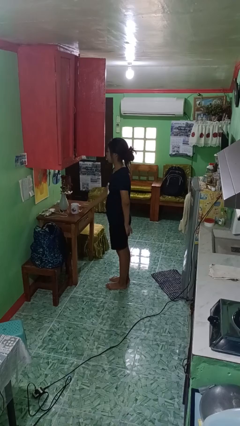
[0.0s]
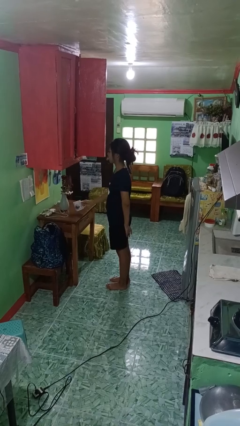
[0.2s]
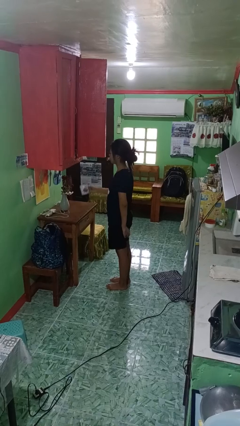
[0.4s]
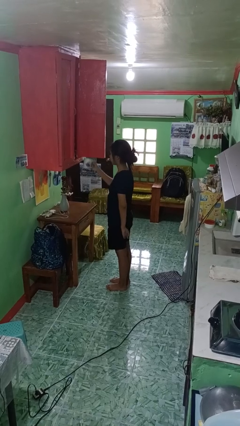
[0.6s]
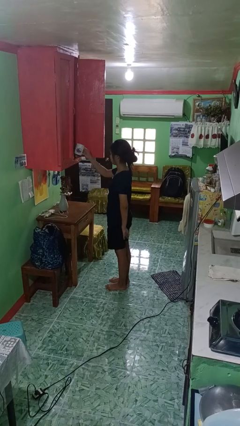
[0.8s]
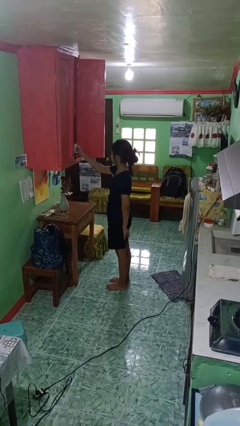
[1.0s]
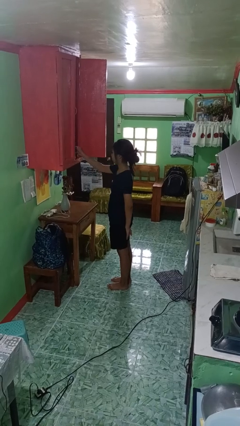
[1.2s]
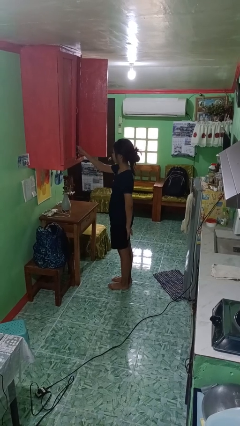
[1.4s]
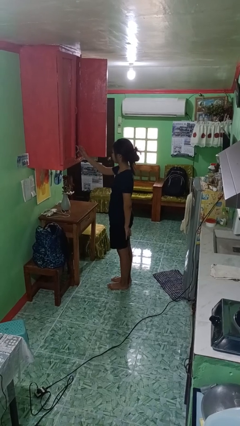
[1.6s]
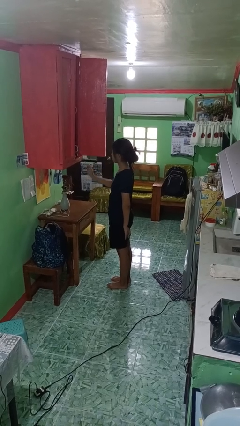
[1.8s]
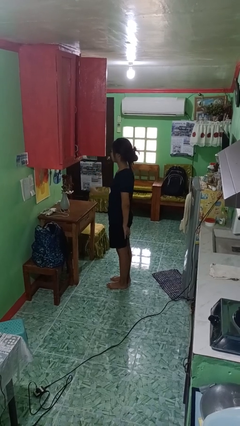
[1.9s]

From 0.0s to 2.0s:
person puts object in cabinet

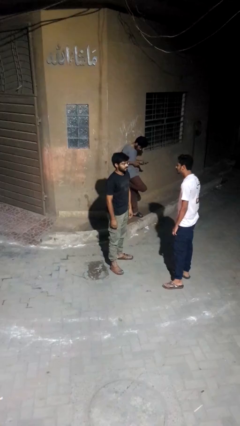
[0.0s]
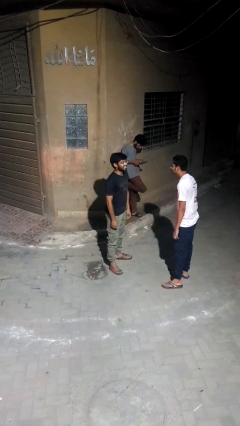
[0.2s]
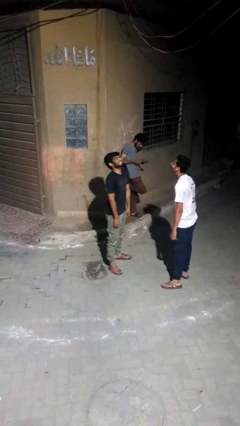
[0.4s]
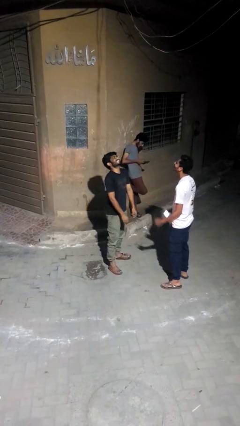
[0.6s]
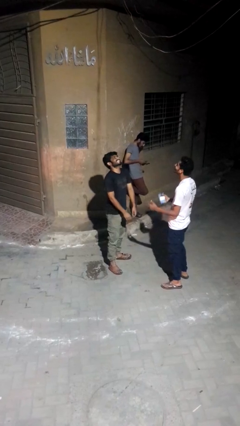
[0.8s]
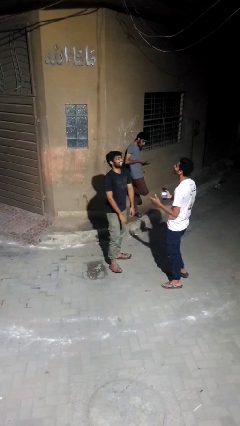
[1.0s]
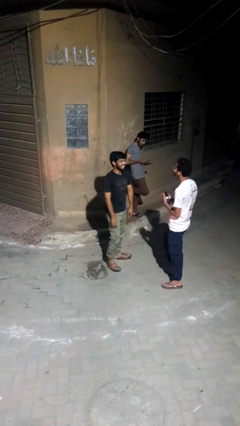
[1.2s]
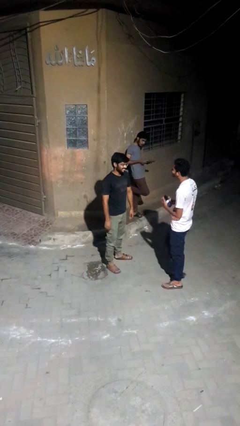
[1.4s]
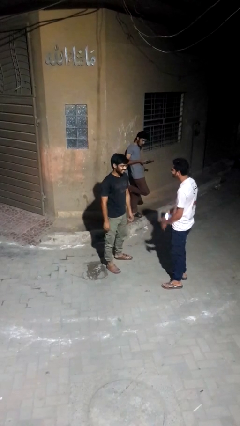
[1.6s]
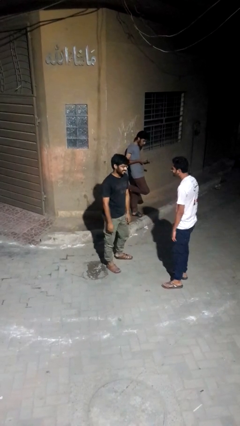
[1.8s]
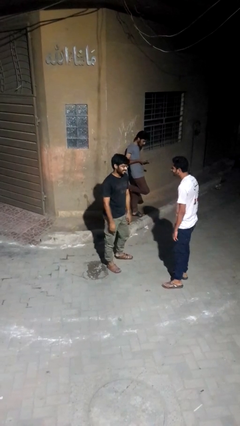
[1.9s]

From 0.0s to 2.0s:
person laughs with person

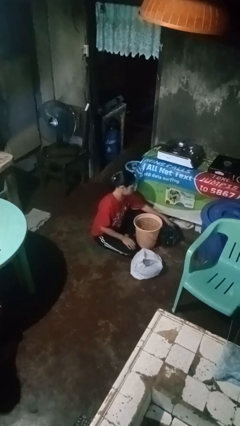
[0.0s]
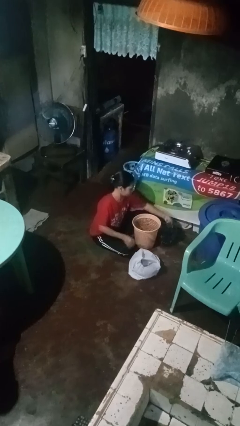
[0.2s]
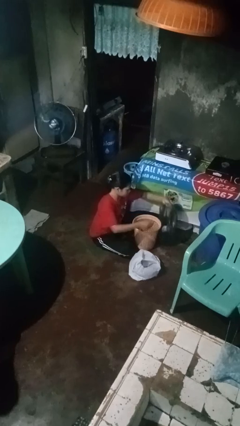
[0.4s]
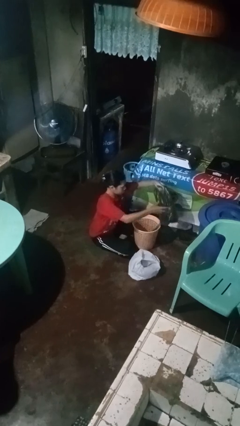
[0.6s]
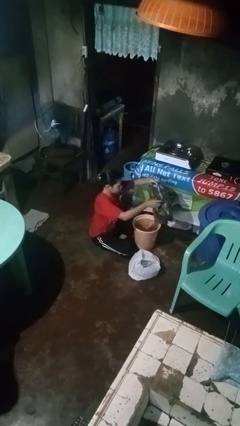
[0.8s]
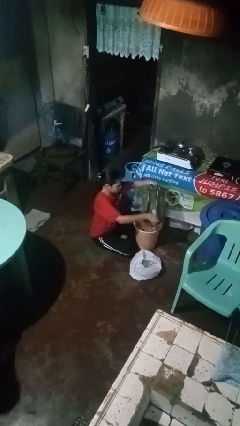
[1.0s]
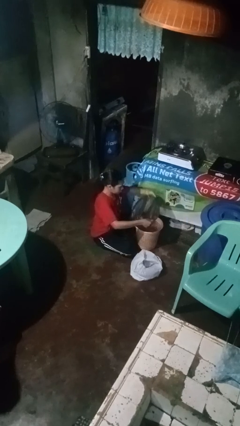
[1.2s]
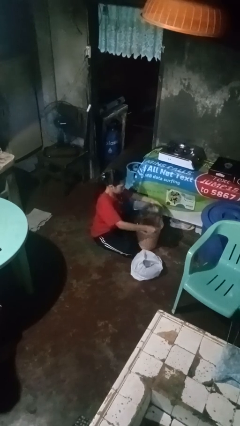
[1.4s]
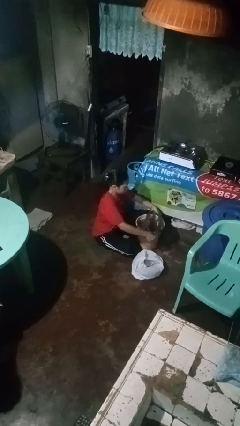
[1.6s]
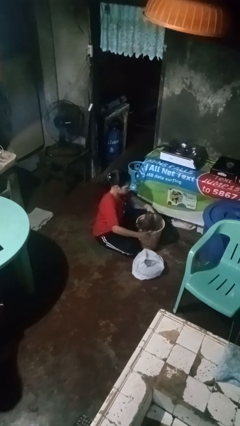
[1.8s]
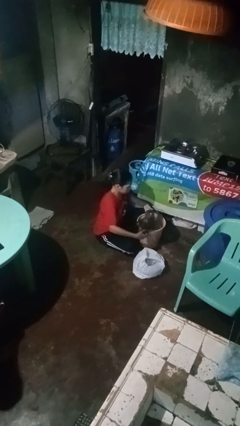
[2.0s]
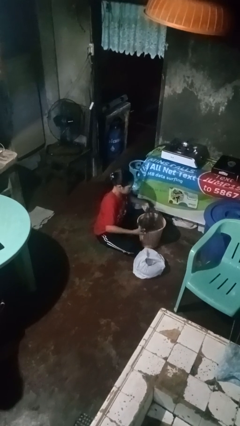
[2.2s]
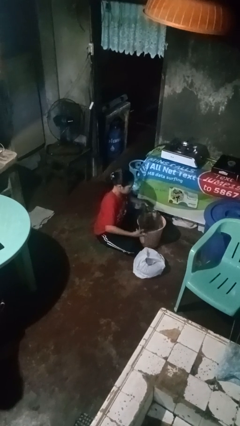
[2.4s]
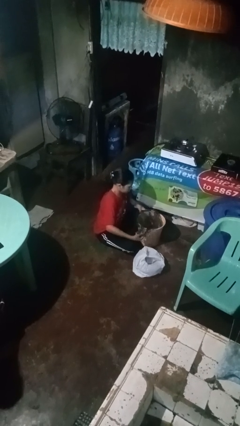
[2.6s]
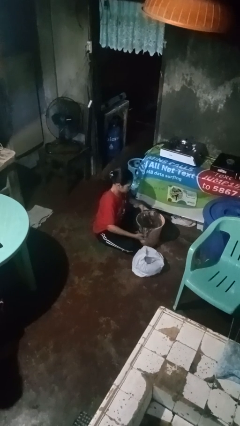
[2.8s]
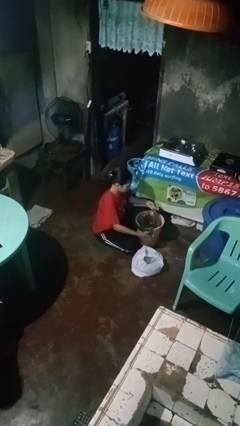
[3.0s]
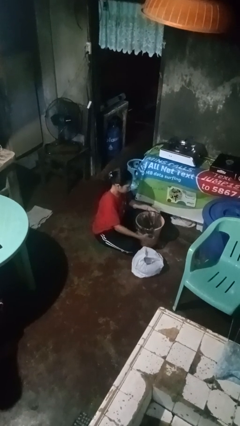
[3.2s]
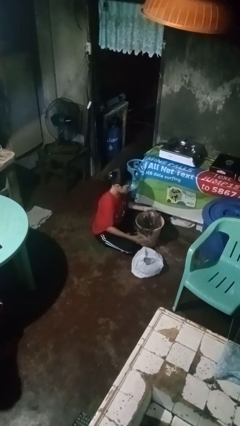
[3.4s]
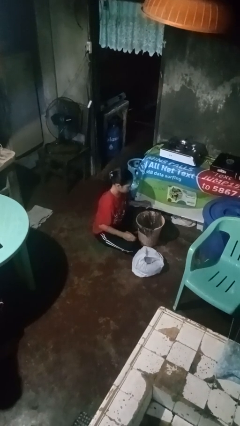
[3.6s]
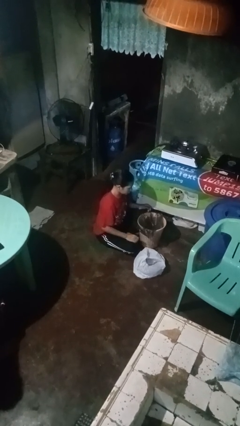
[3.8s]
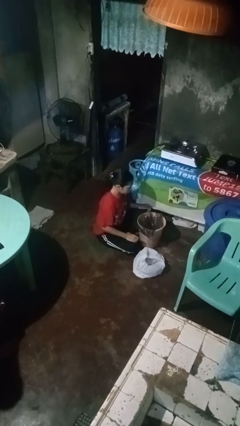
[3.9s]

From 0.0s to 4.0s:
person inserts trashbag into trashcan

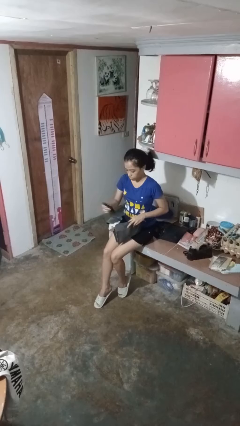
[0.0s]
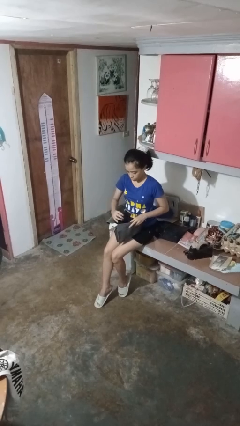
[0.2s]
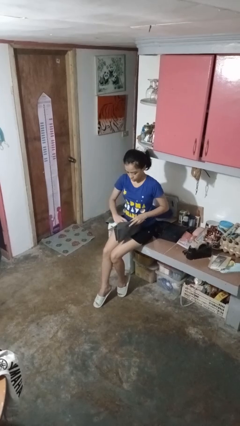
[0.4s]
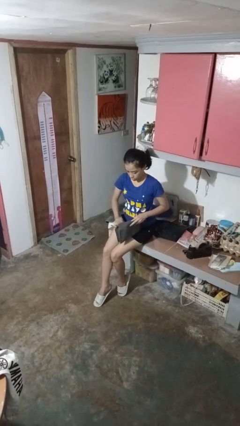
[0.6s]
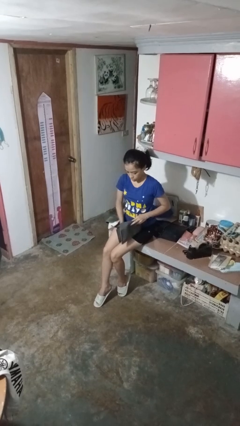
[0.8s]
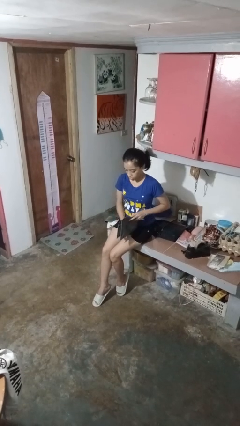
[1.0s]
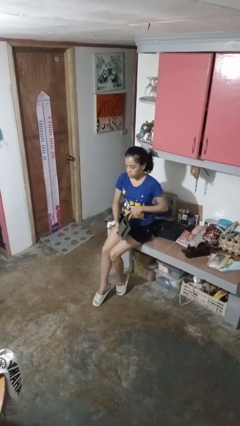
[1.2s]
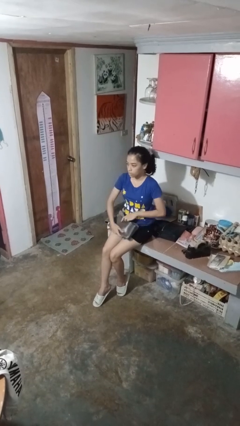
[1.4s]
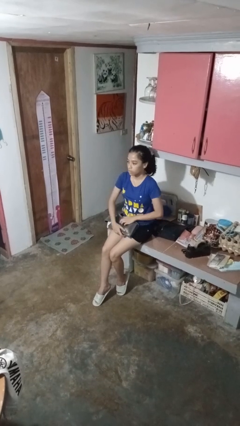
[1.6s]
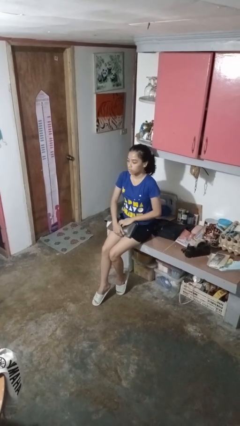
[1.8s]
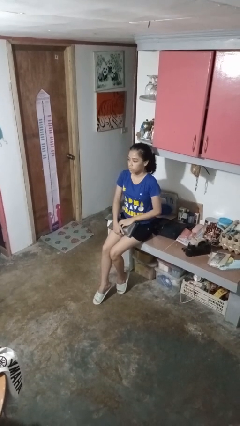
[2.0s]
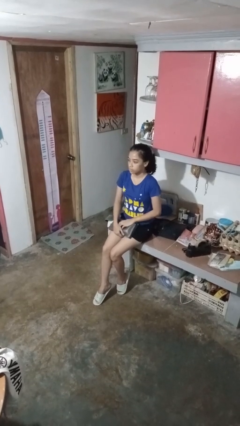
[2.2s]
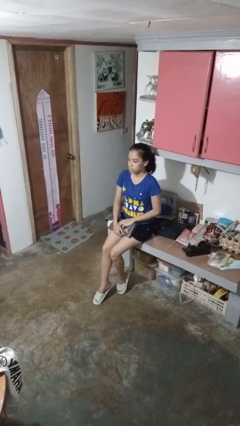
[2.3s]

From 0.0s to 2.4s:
person puts object into purse

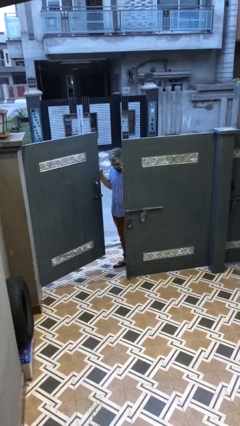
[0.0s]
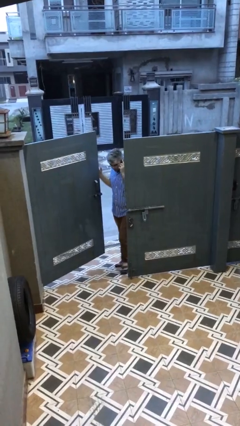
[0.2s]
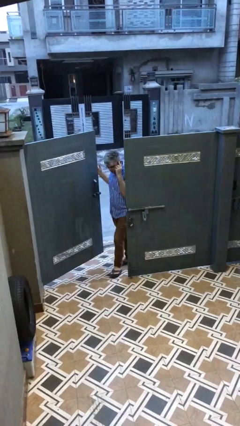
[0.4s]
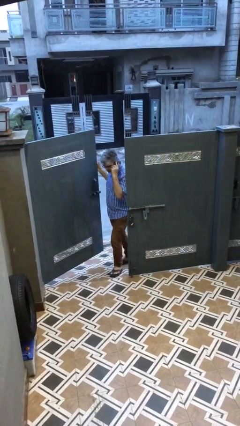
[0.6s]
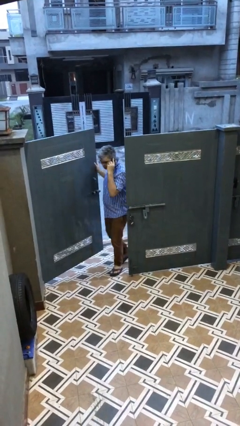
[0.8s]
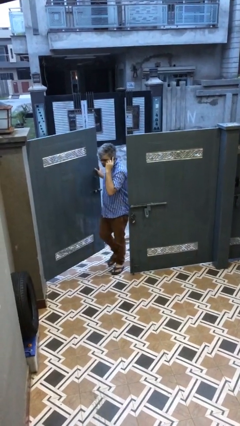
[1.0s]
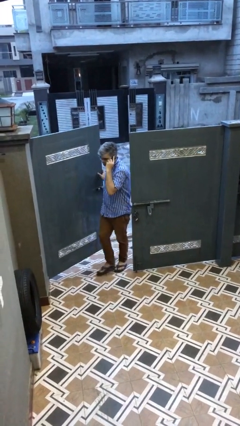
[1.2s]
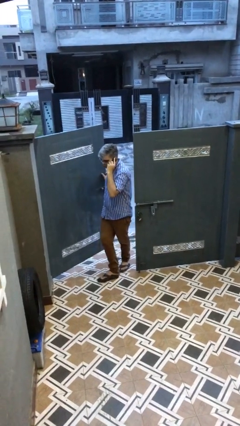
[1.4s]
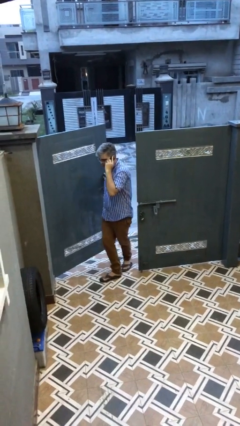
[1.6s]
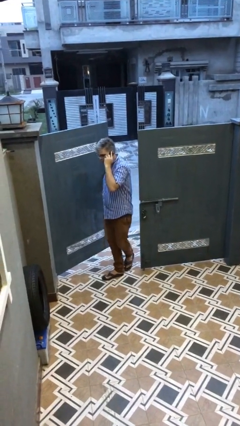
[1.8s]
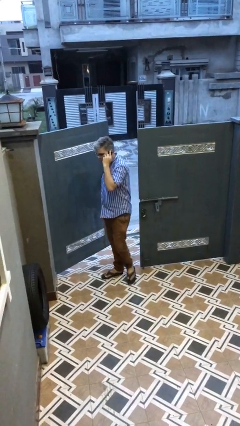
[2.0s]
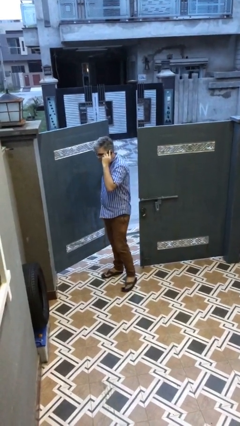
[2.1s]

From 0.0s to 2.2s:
person enters scene through structure

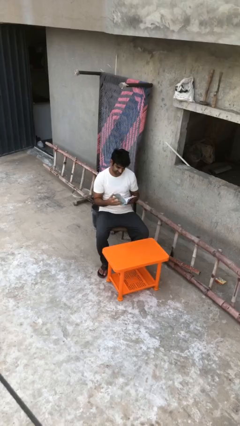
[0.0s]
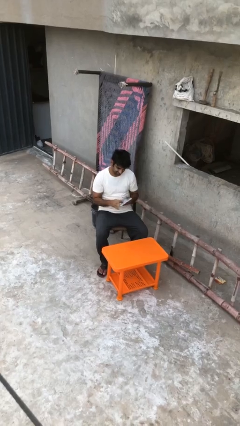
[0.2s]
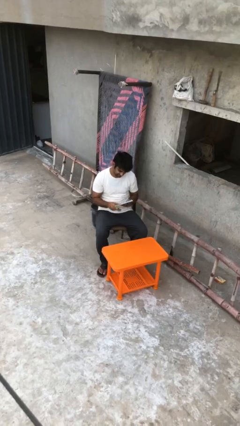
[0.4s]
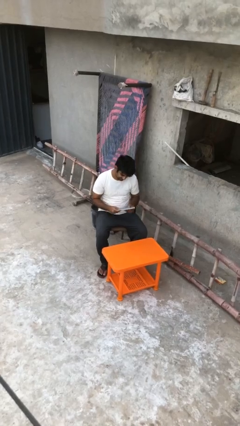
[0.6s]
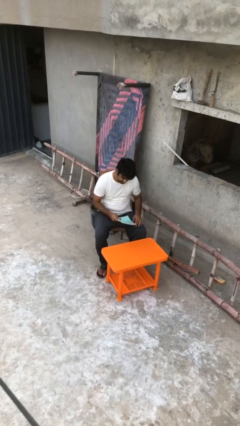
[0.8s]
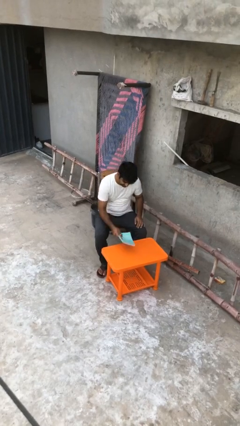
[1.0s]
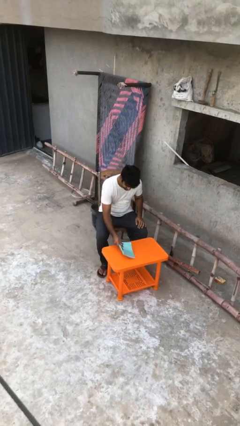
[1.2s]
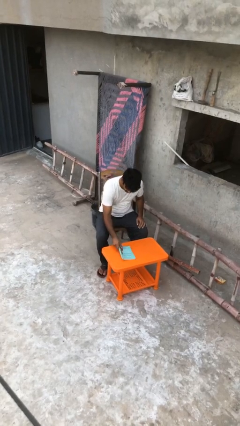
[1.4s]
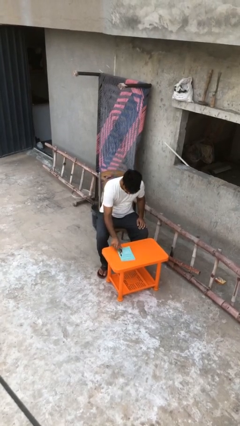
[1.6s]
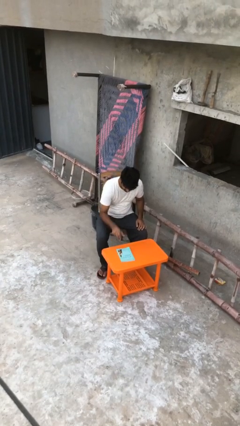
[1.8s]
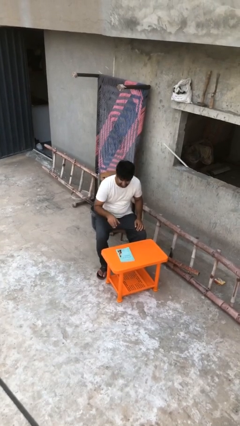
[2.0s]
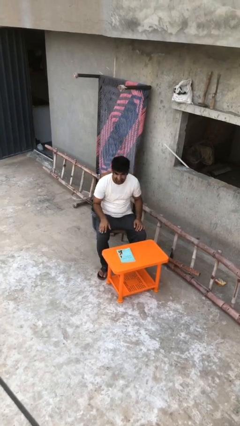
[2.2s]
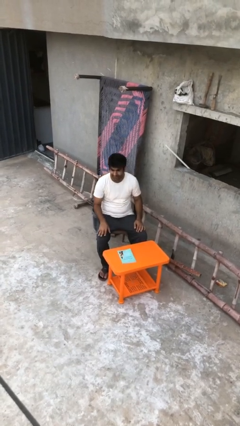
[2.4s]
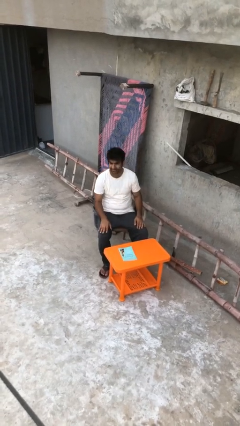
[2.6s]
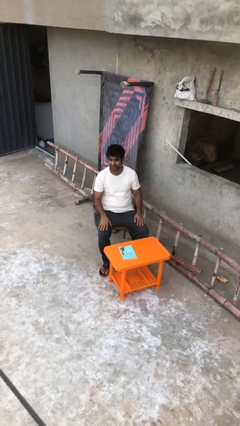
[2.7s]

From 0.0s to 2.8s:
person puts down object on table

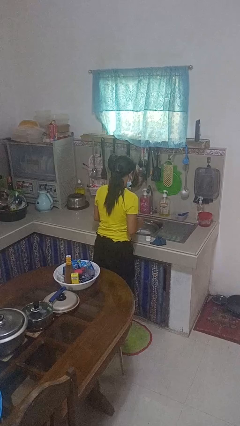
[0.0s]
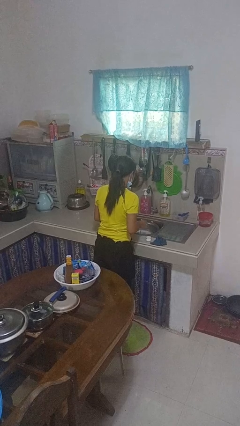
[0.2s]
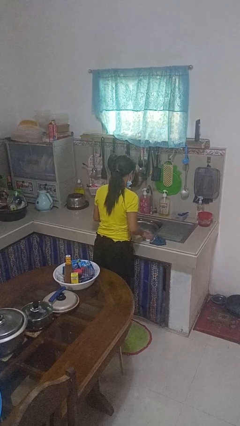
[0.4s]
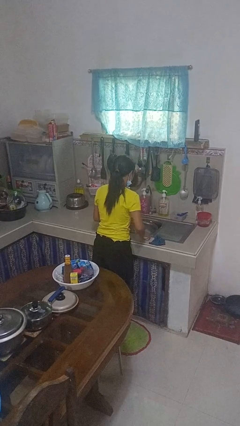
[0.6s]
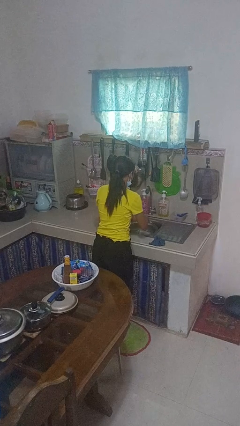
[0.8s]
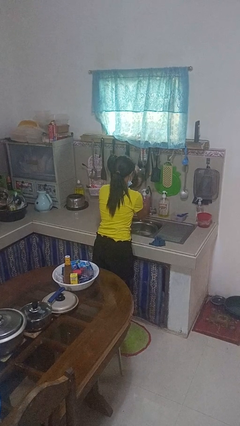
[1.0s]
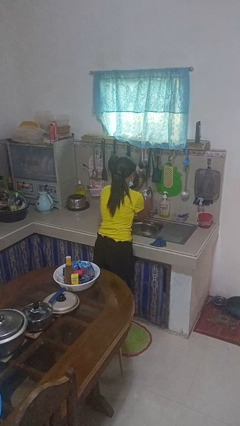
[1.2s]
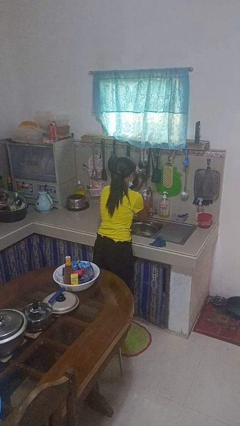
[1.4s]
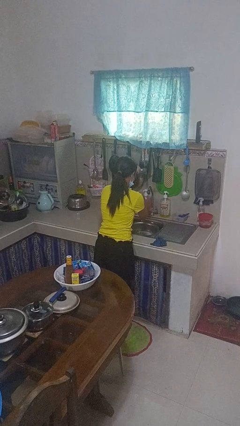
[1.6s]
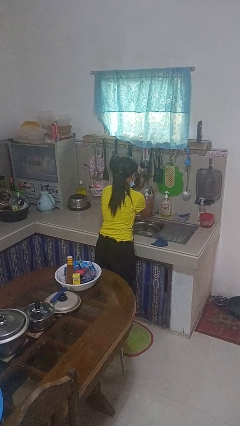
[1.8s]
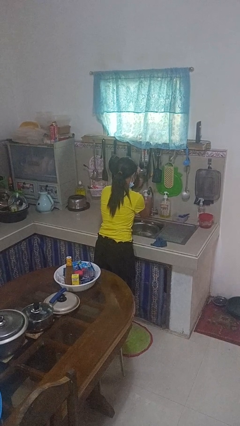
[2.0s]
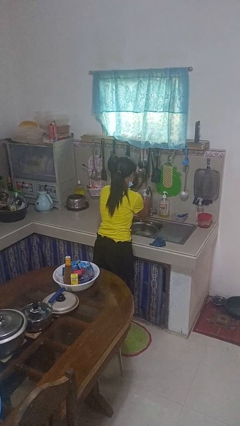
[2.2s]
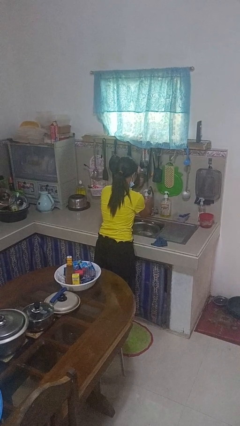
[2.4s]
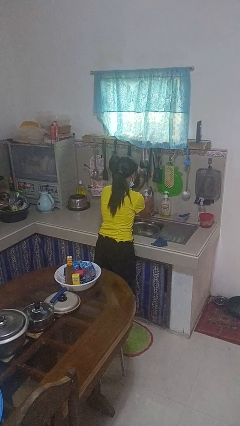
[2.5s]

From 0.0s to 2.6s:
person washes hands
